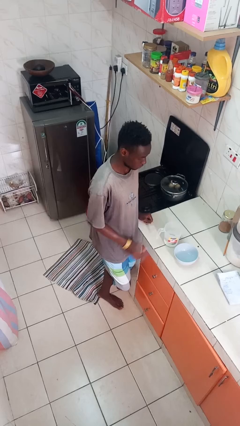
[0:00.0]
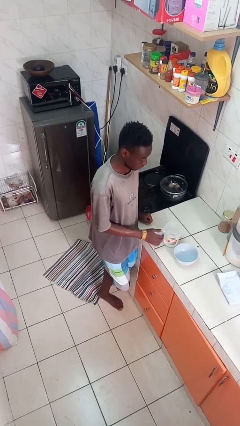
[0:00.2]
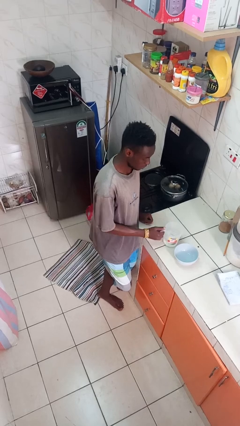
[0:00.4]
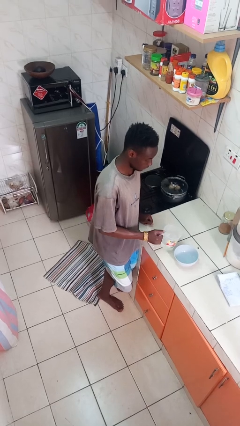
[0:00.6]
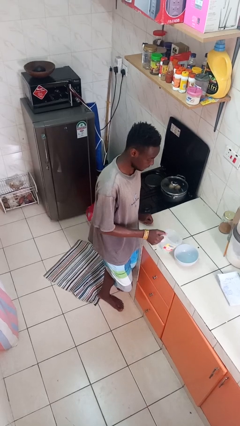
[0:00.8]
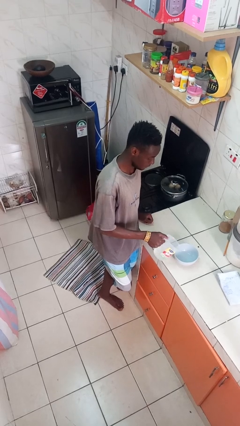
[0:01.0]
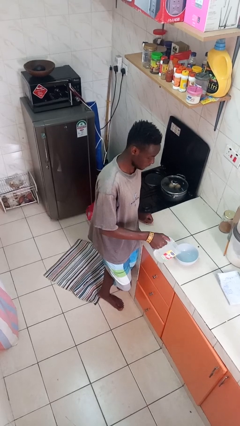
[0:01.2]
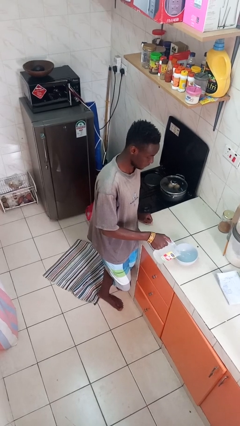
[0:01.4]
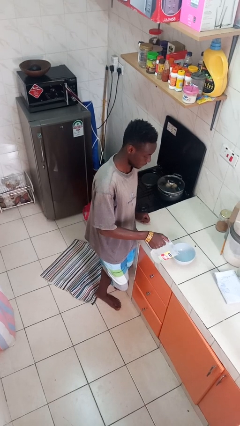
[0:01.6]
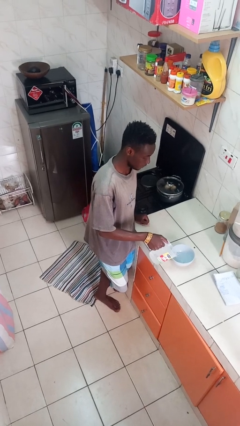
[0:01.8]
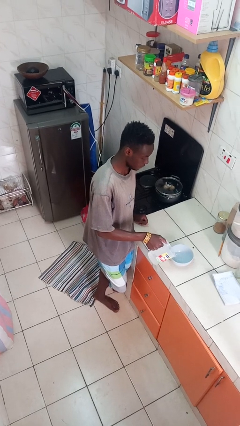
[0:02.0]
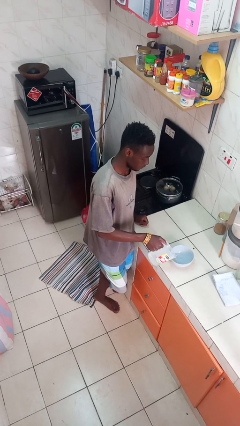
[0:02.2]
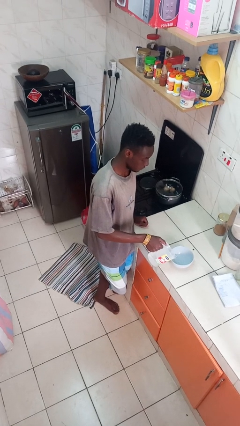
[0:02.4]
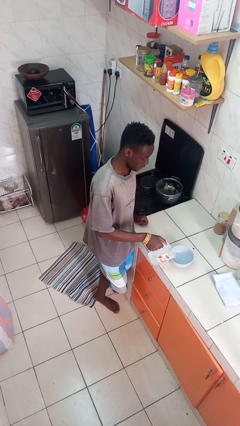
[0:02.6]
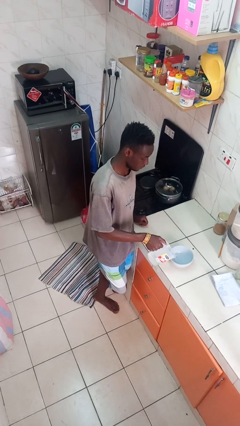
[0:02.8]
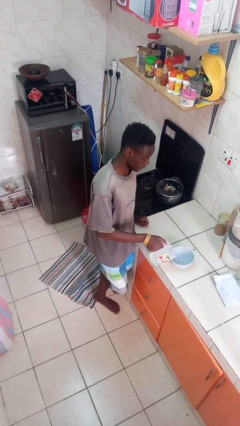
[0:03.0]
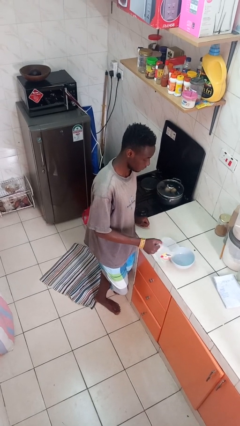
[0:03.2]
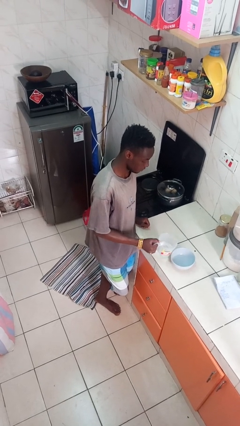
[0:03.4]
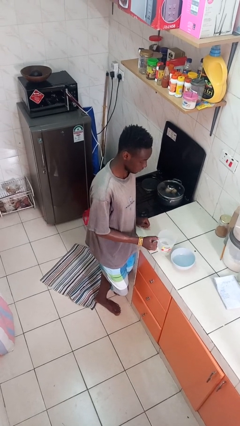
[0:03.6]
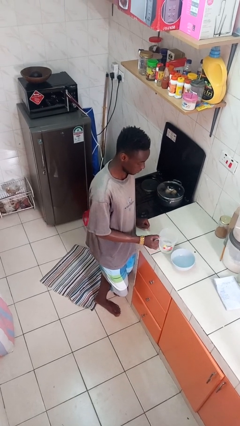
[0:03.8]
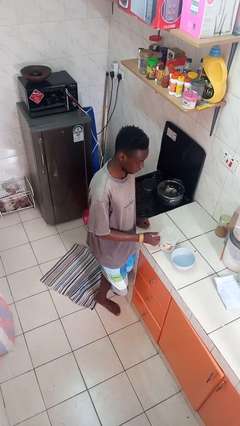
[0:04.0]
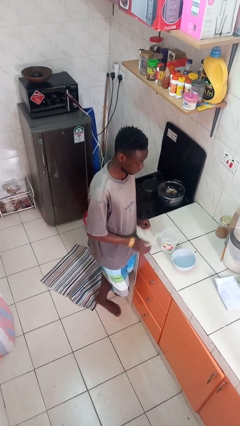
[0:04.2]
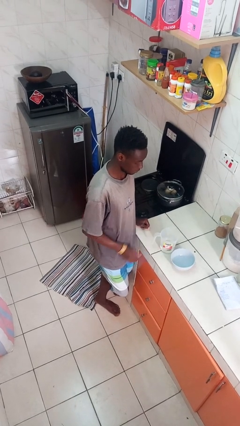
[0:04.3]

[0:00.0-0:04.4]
person pours into bowl

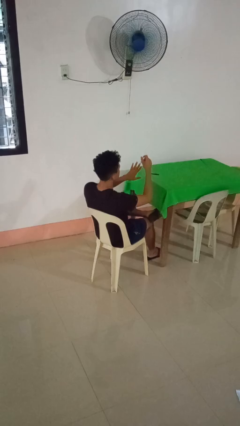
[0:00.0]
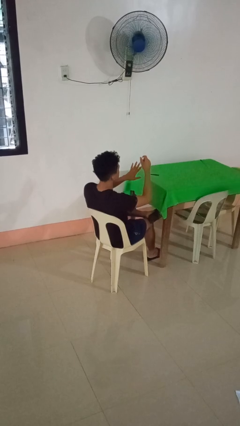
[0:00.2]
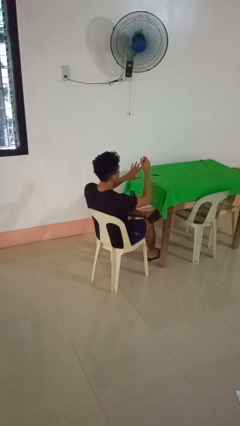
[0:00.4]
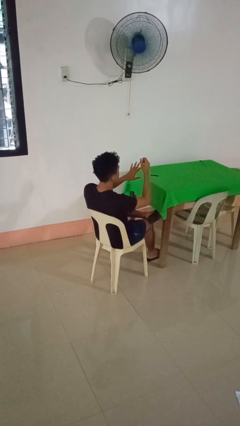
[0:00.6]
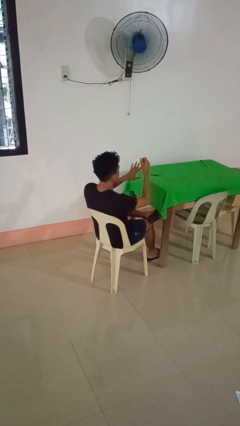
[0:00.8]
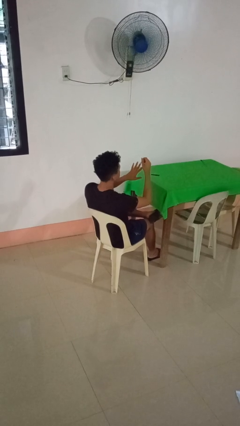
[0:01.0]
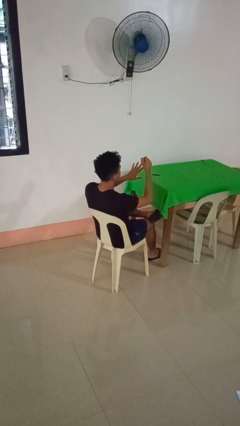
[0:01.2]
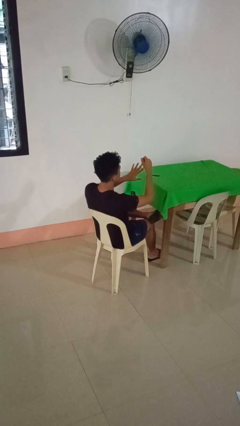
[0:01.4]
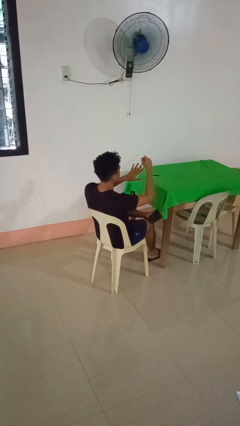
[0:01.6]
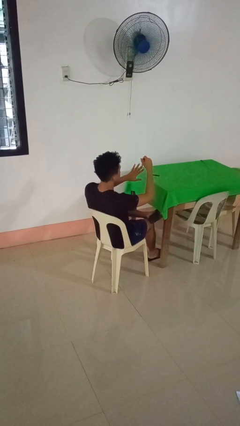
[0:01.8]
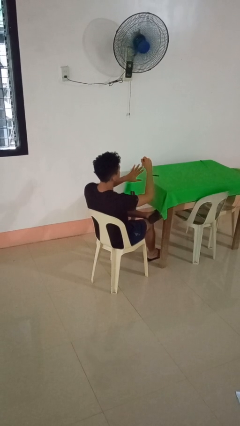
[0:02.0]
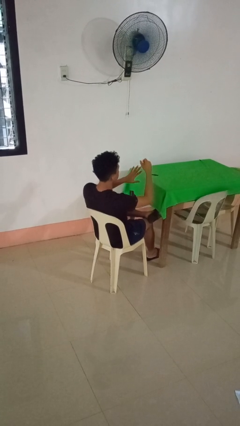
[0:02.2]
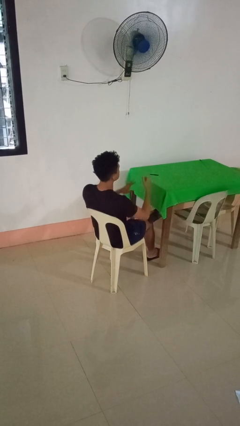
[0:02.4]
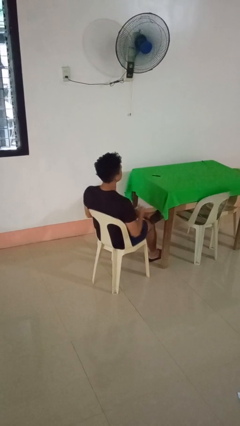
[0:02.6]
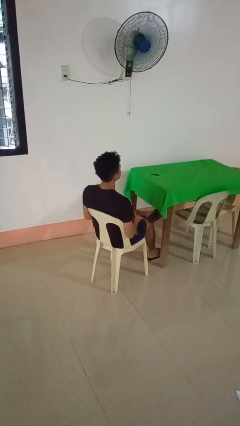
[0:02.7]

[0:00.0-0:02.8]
person clips fingernails

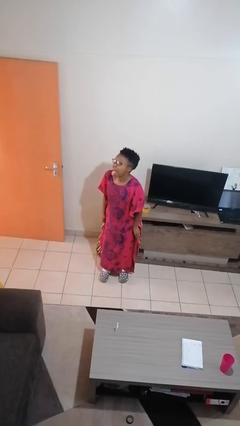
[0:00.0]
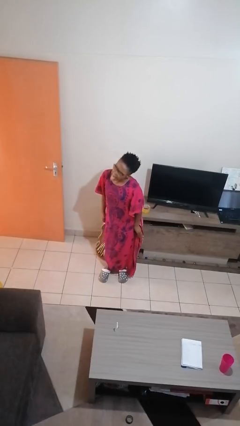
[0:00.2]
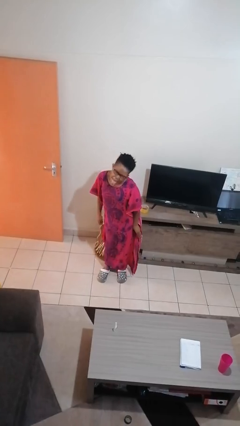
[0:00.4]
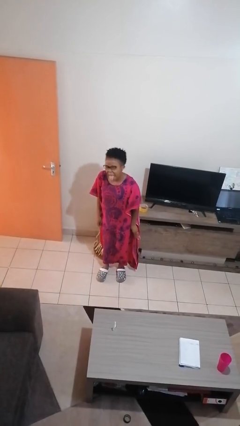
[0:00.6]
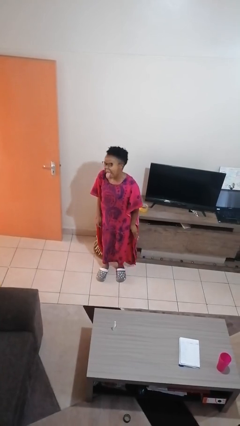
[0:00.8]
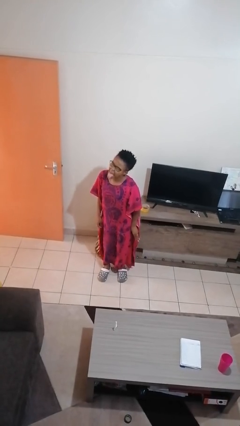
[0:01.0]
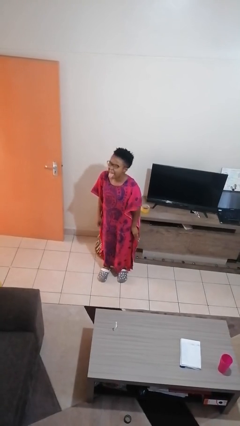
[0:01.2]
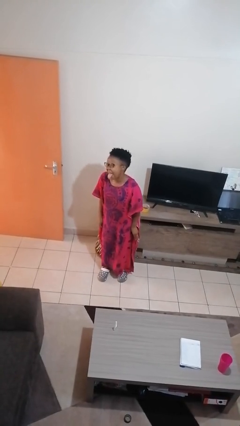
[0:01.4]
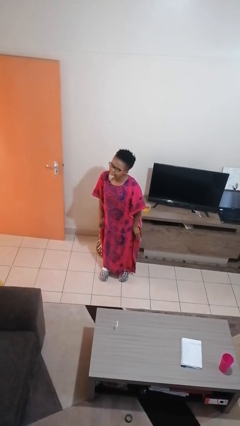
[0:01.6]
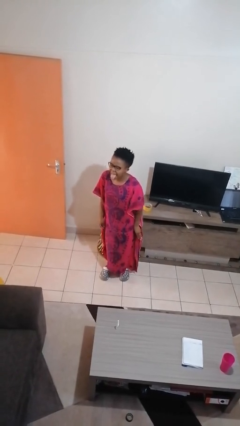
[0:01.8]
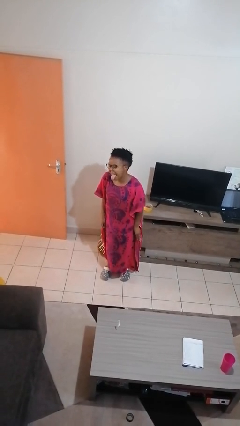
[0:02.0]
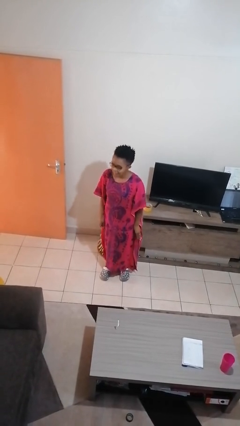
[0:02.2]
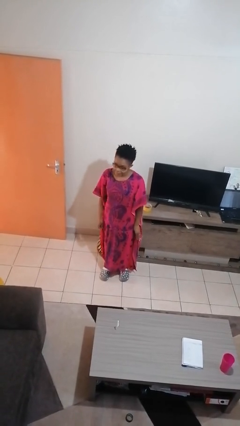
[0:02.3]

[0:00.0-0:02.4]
person sticks out tongue

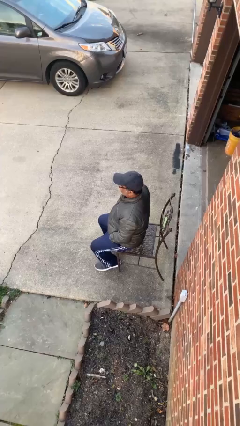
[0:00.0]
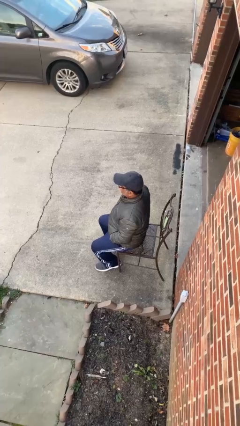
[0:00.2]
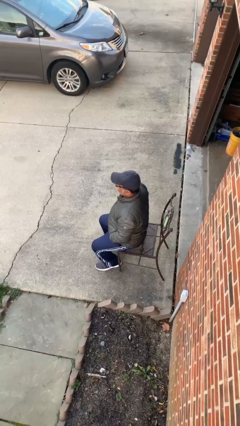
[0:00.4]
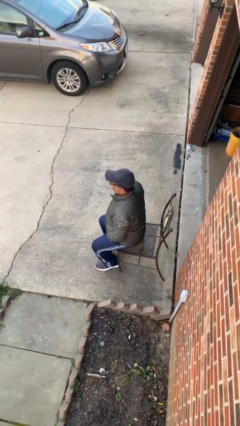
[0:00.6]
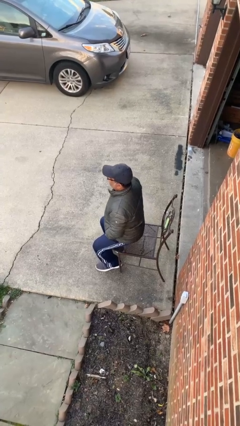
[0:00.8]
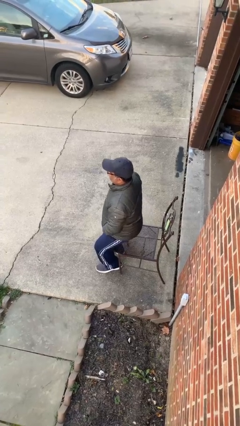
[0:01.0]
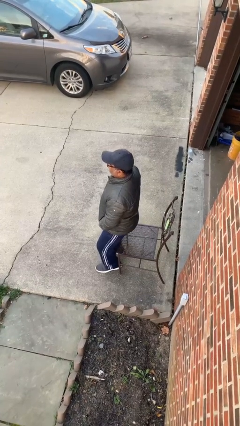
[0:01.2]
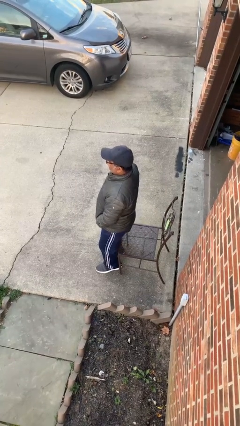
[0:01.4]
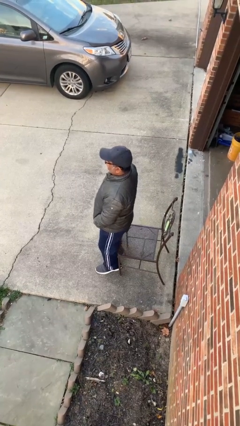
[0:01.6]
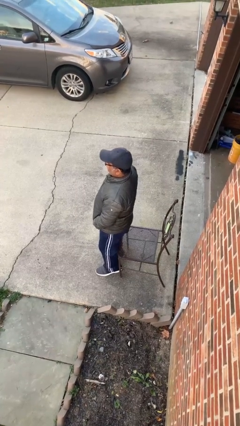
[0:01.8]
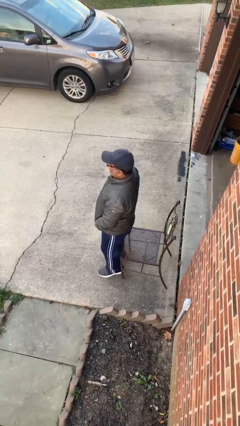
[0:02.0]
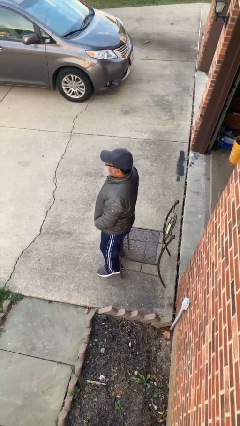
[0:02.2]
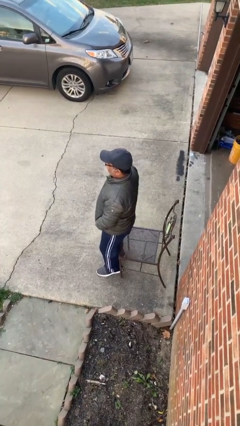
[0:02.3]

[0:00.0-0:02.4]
person stands up

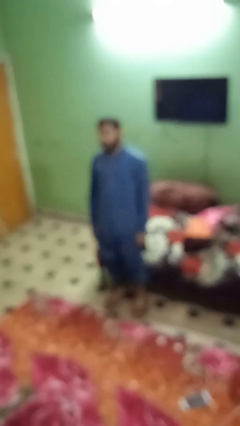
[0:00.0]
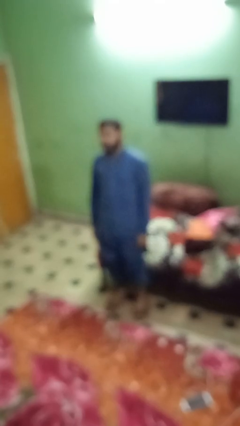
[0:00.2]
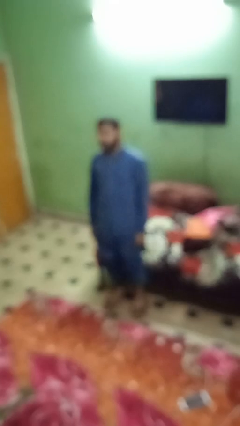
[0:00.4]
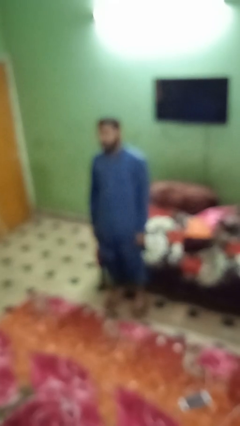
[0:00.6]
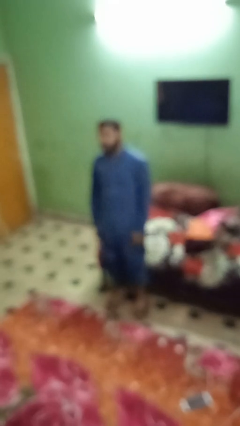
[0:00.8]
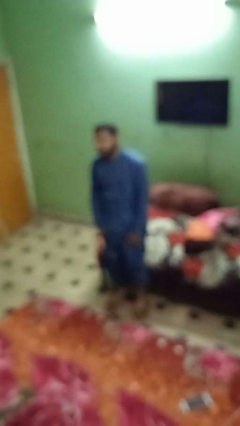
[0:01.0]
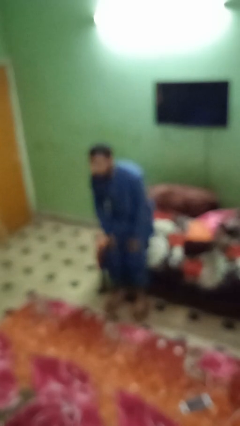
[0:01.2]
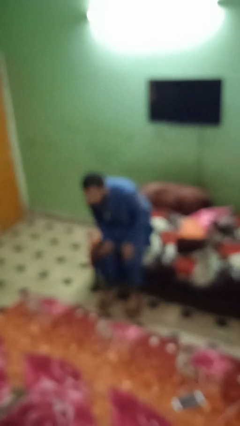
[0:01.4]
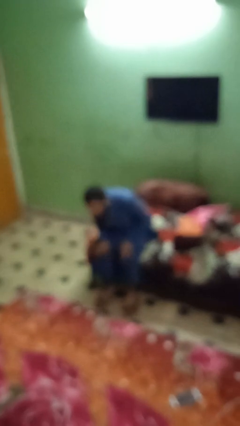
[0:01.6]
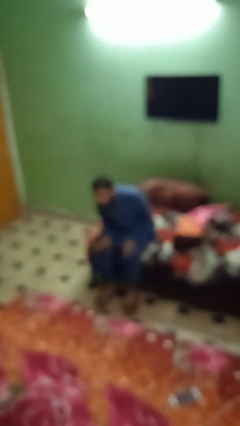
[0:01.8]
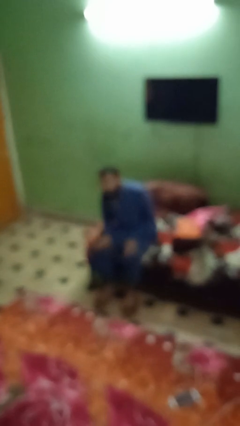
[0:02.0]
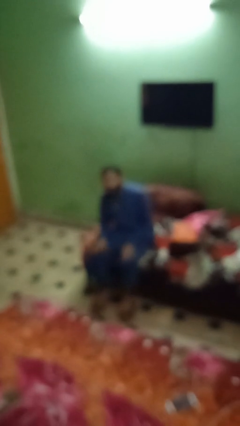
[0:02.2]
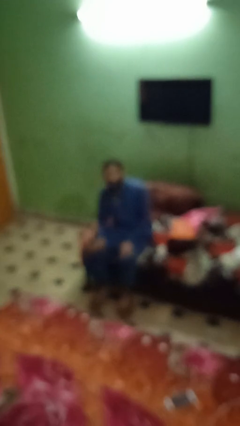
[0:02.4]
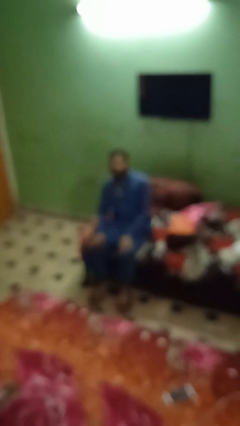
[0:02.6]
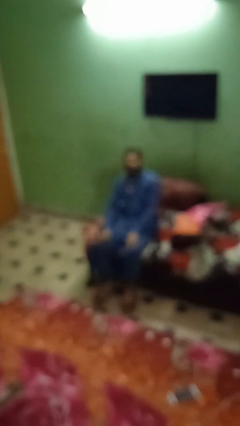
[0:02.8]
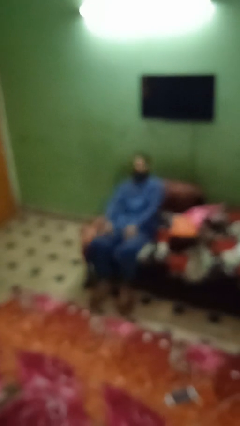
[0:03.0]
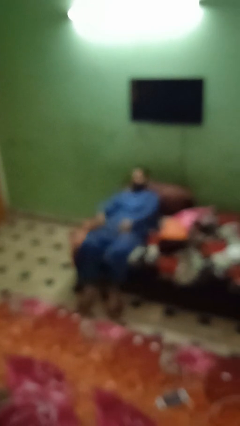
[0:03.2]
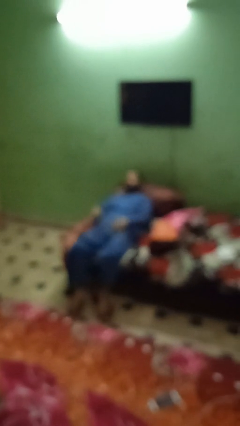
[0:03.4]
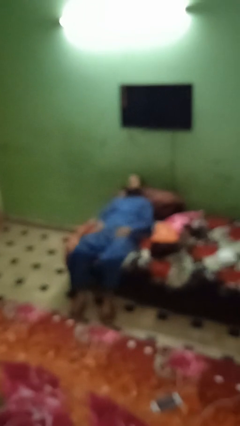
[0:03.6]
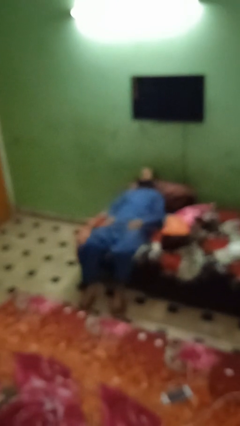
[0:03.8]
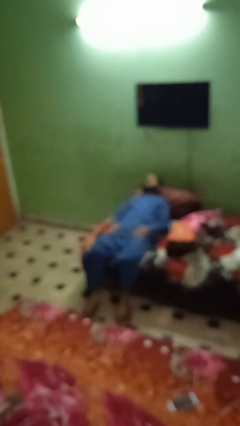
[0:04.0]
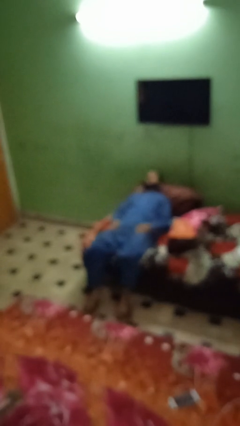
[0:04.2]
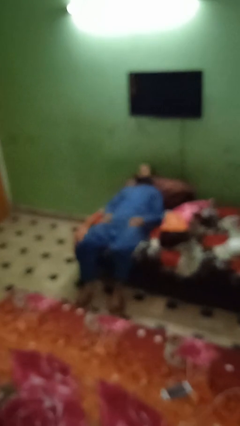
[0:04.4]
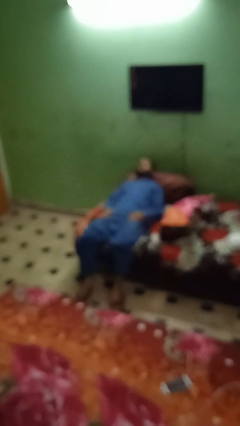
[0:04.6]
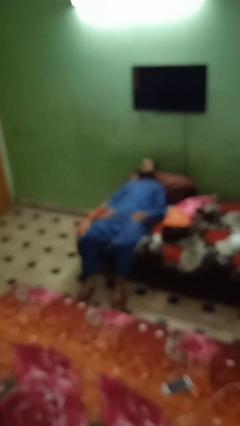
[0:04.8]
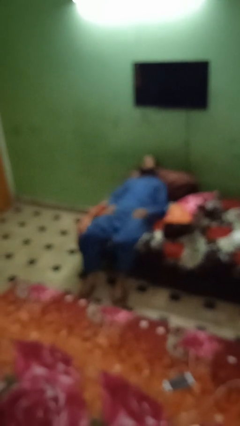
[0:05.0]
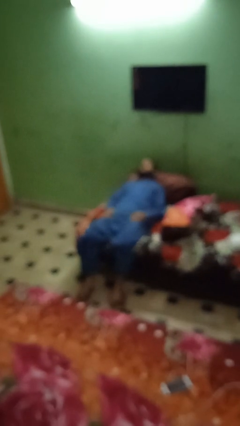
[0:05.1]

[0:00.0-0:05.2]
person lies down on couch
